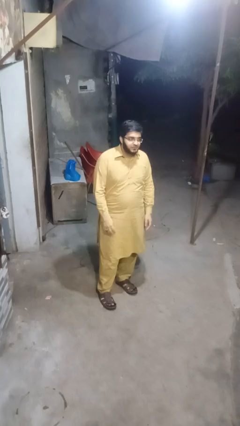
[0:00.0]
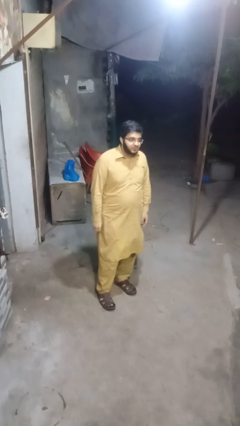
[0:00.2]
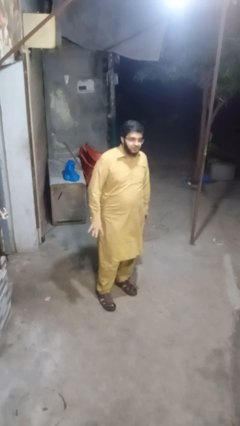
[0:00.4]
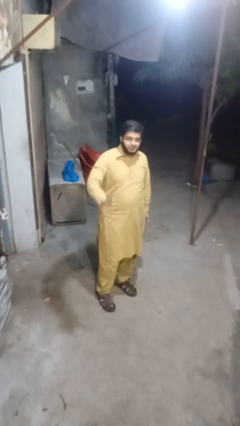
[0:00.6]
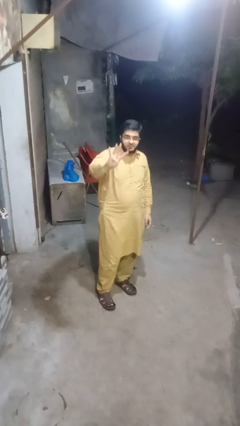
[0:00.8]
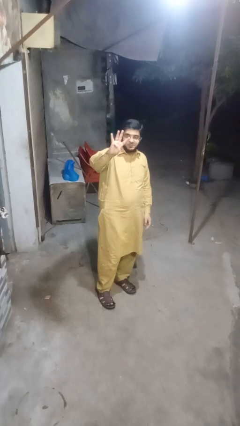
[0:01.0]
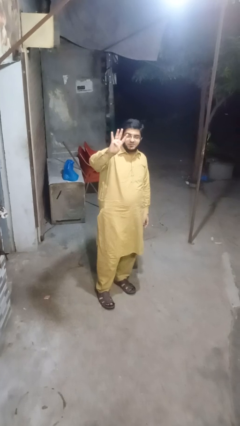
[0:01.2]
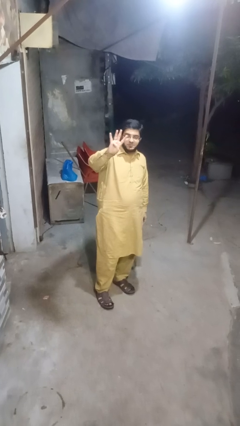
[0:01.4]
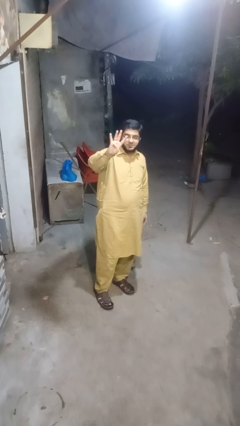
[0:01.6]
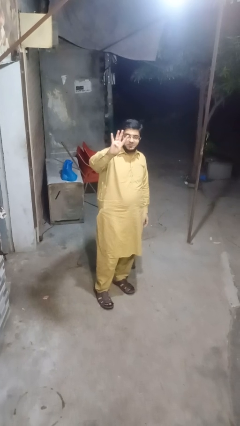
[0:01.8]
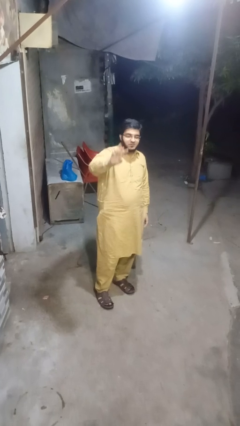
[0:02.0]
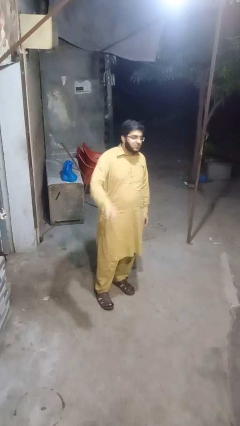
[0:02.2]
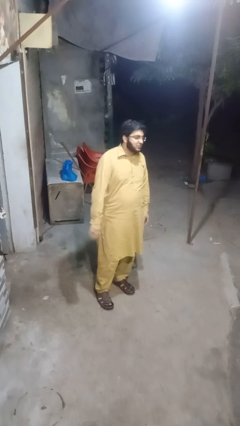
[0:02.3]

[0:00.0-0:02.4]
person gestures number four

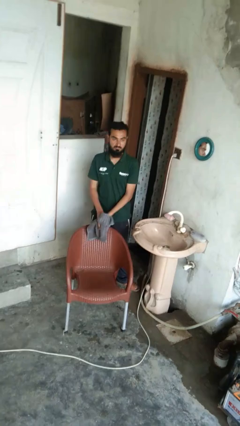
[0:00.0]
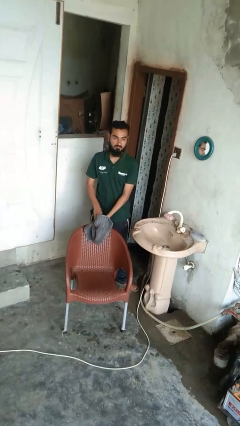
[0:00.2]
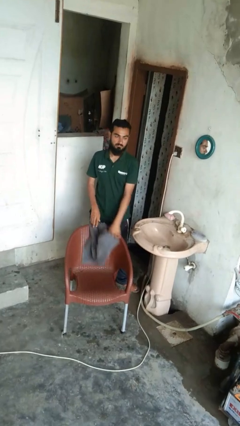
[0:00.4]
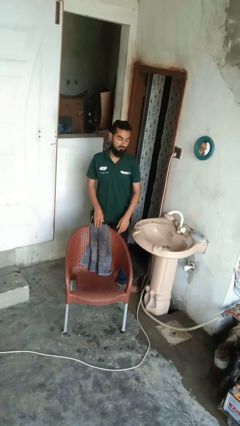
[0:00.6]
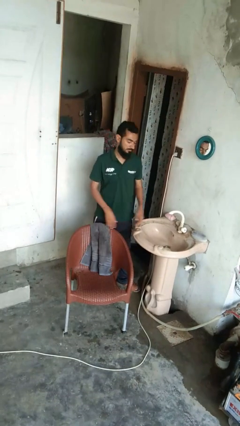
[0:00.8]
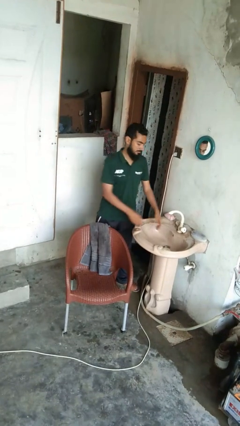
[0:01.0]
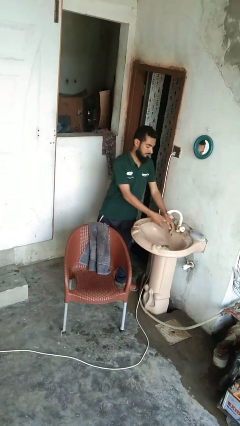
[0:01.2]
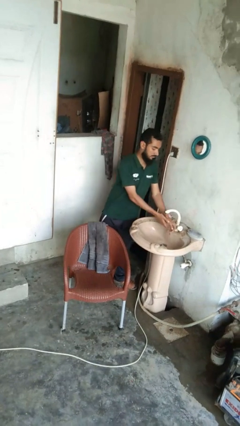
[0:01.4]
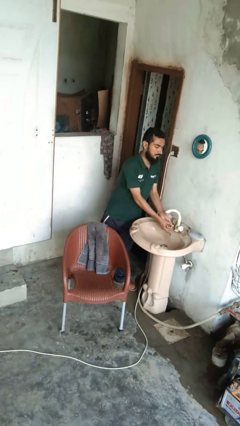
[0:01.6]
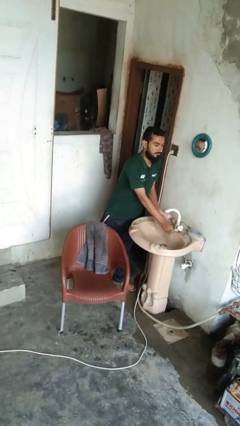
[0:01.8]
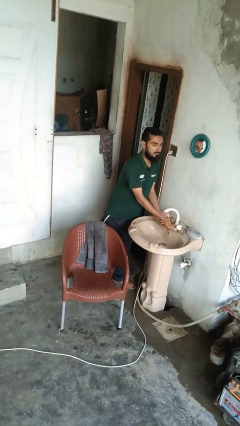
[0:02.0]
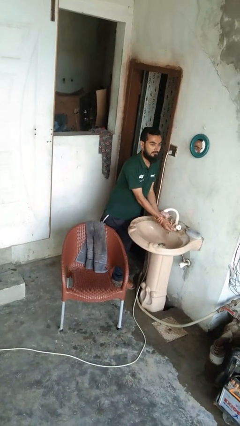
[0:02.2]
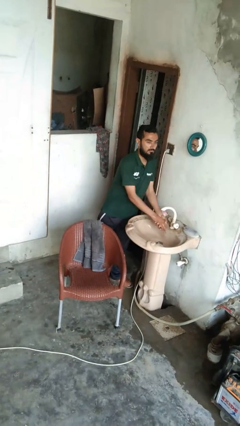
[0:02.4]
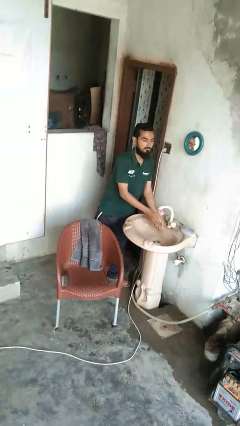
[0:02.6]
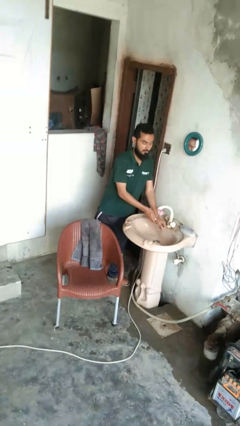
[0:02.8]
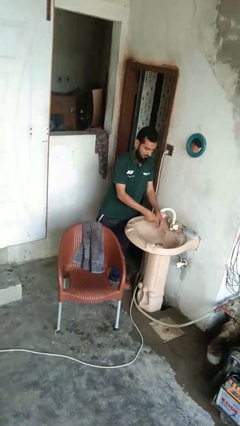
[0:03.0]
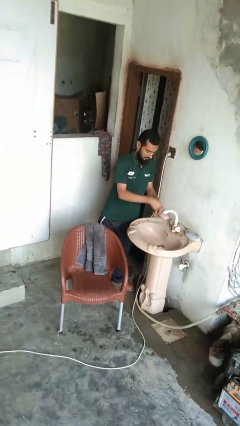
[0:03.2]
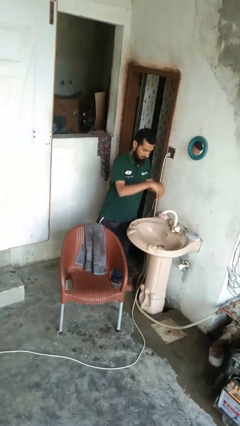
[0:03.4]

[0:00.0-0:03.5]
person washes hands

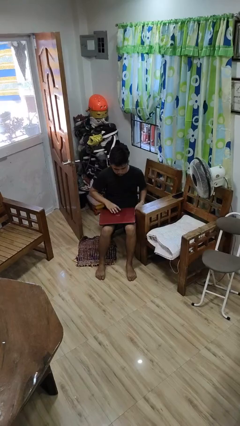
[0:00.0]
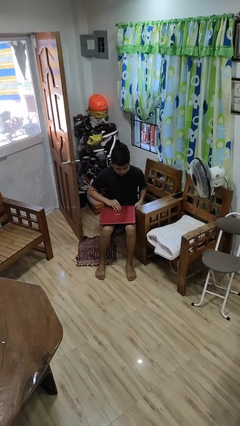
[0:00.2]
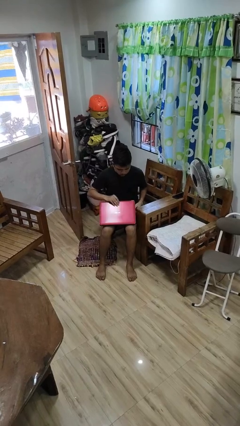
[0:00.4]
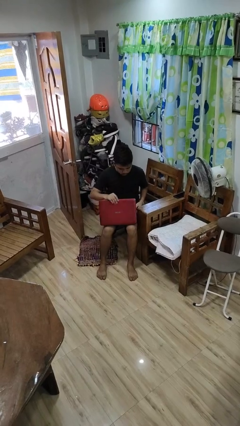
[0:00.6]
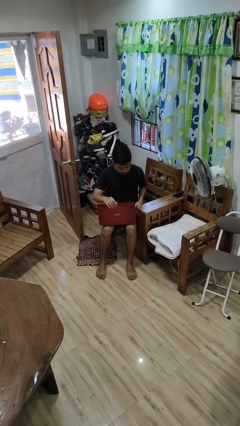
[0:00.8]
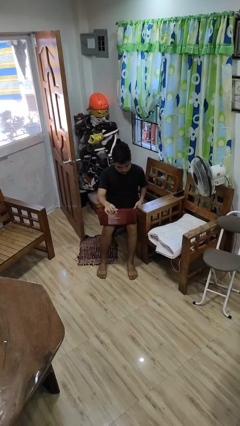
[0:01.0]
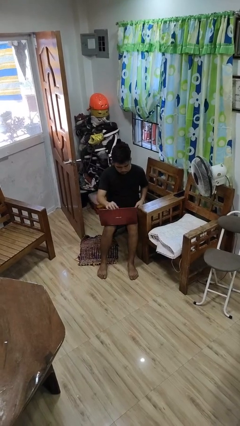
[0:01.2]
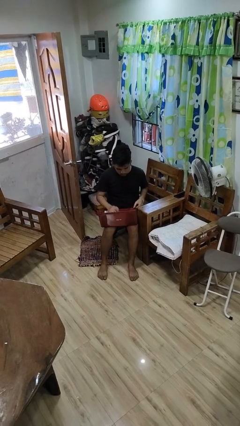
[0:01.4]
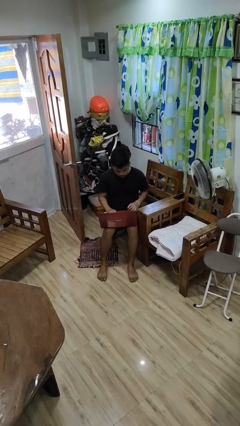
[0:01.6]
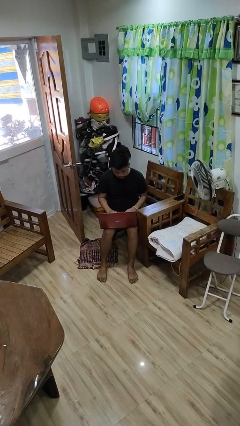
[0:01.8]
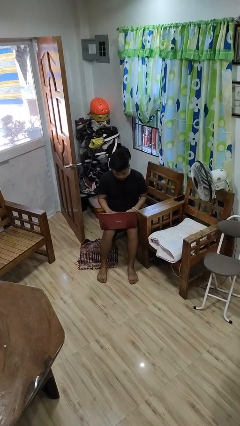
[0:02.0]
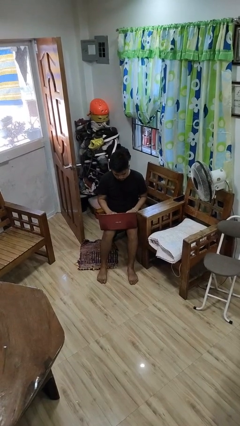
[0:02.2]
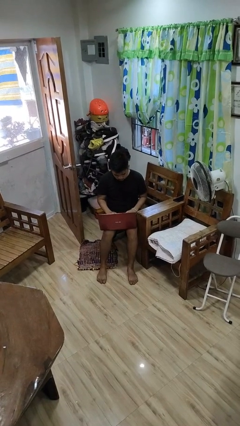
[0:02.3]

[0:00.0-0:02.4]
person opens laptop

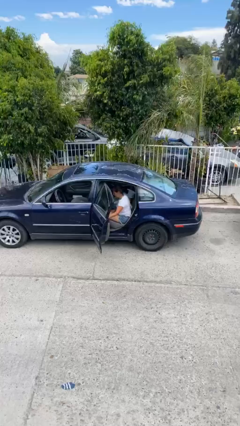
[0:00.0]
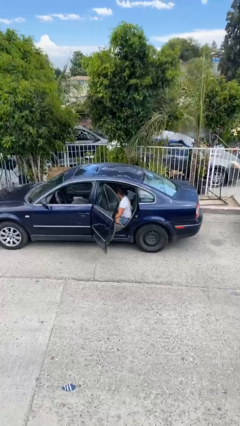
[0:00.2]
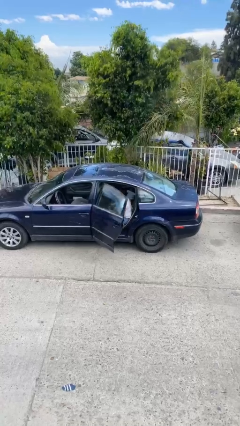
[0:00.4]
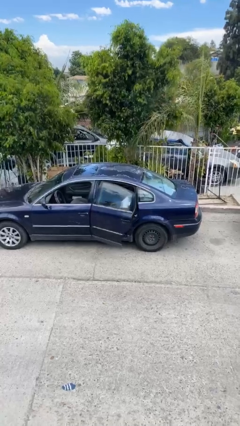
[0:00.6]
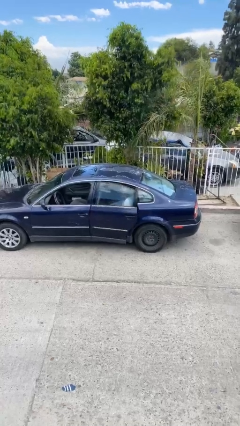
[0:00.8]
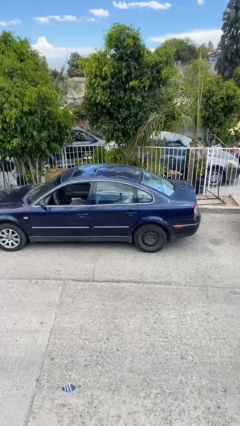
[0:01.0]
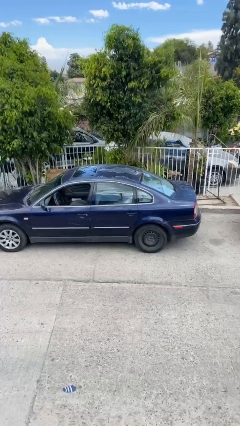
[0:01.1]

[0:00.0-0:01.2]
person closes car door

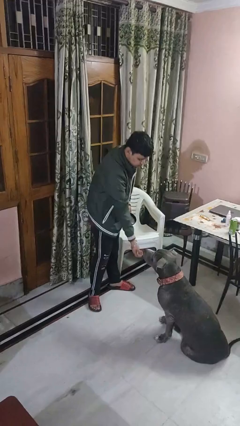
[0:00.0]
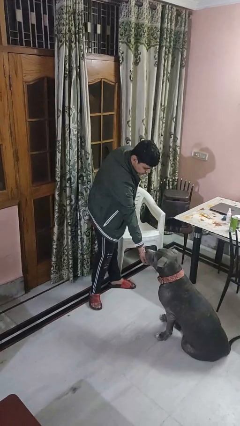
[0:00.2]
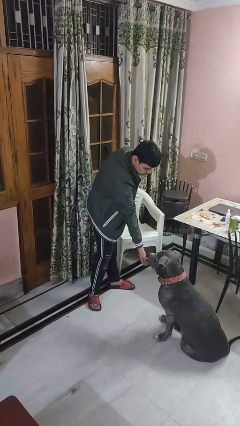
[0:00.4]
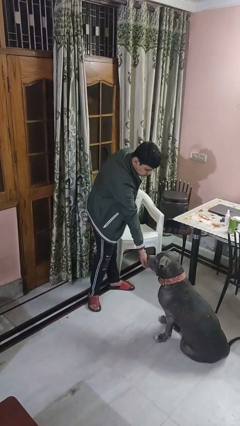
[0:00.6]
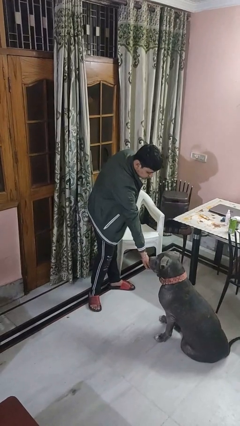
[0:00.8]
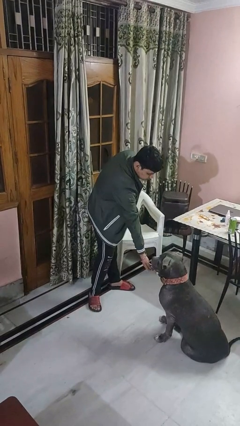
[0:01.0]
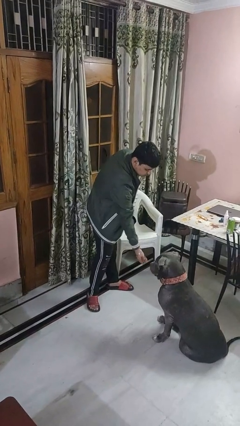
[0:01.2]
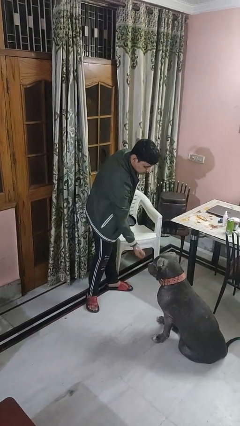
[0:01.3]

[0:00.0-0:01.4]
person feeds dog

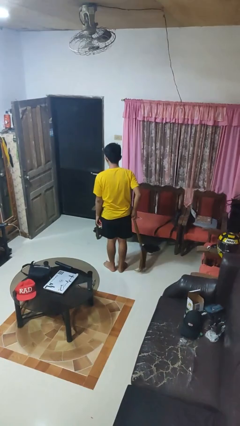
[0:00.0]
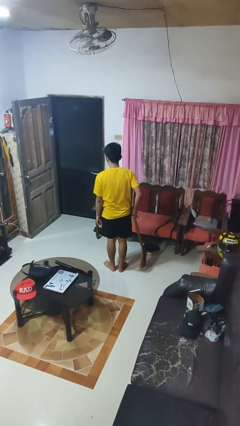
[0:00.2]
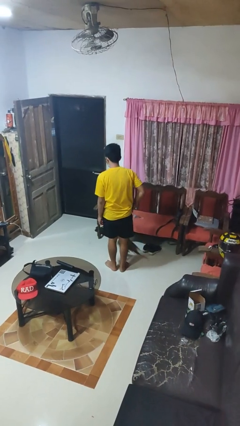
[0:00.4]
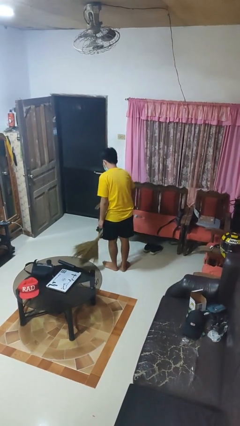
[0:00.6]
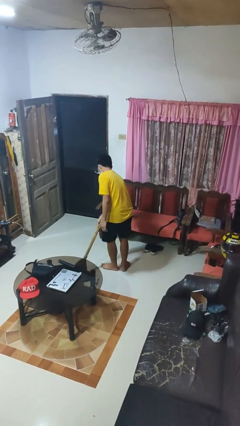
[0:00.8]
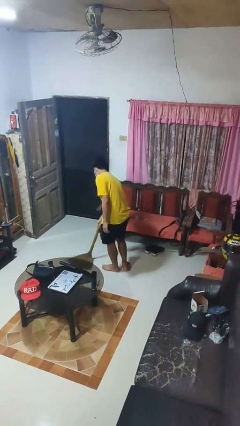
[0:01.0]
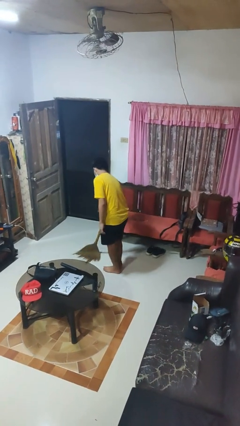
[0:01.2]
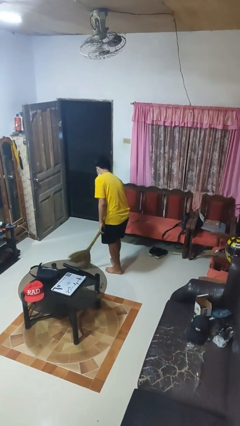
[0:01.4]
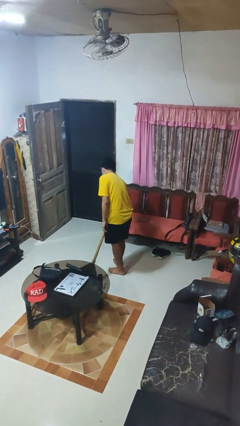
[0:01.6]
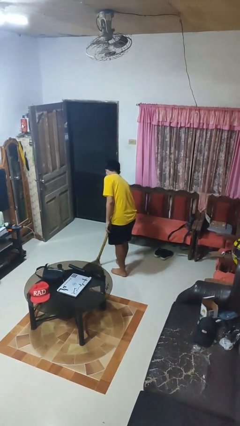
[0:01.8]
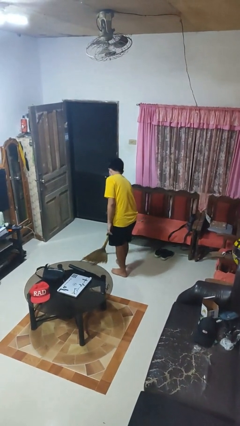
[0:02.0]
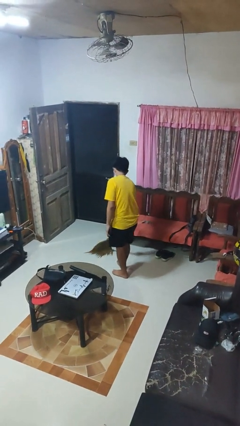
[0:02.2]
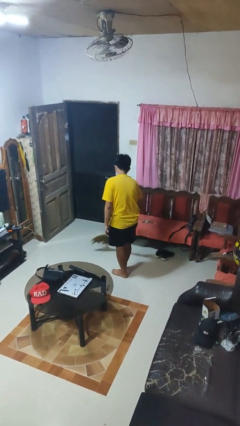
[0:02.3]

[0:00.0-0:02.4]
person sweeps floor

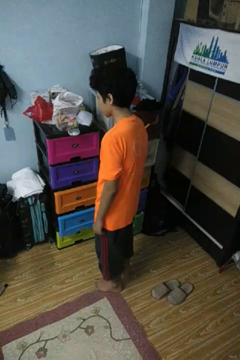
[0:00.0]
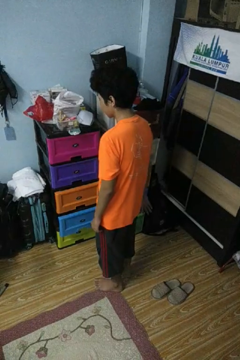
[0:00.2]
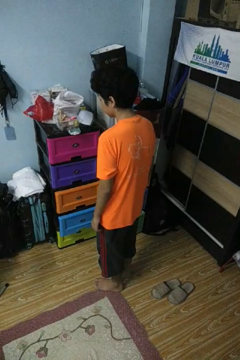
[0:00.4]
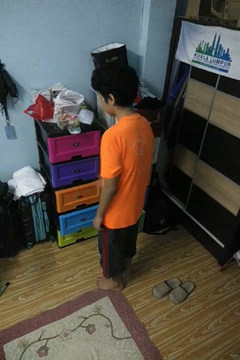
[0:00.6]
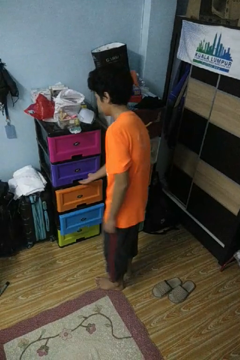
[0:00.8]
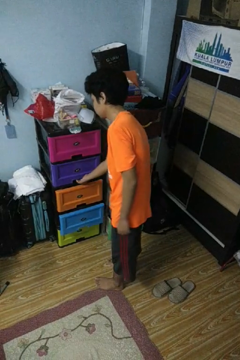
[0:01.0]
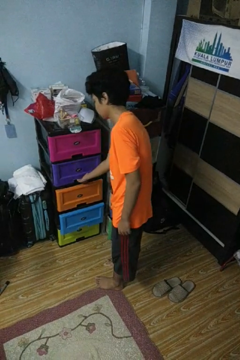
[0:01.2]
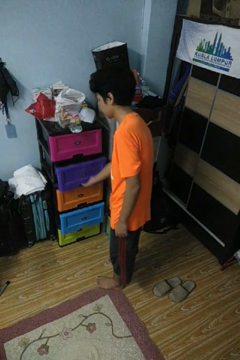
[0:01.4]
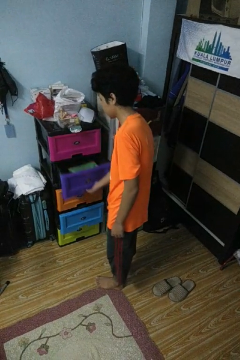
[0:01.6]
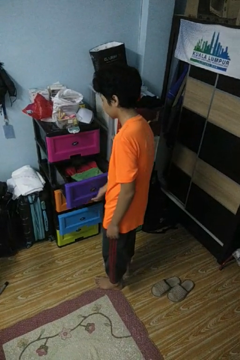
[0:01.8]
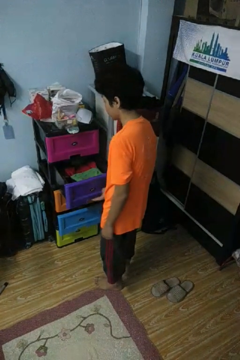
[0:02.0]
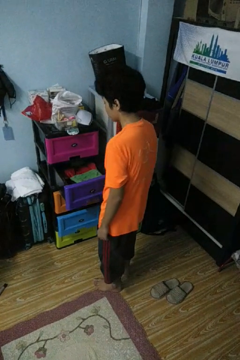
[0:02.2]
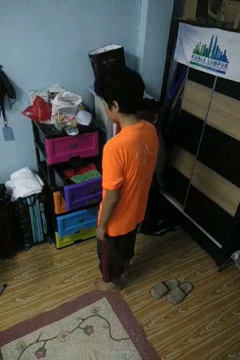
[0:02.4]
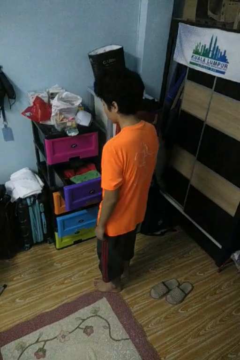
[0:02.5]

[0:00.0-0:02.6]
person opens dresser drawer

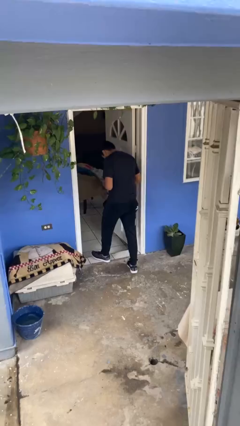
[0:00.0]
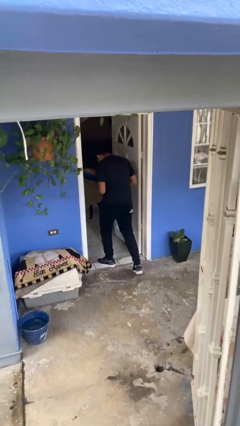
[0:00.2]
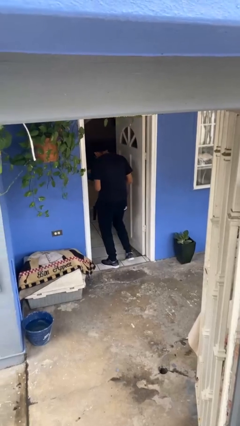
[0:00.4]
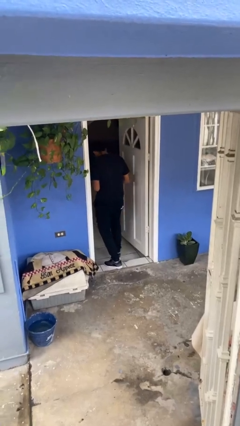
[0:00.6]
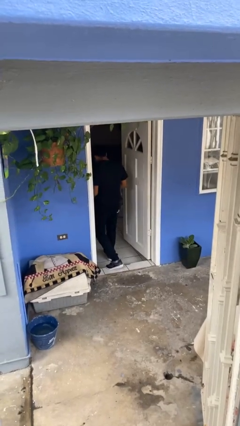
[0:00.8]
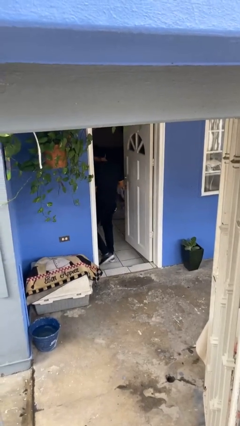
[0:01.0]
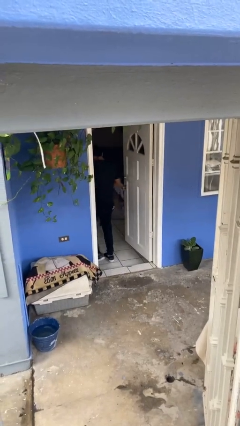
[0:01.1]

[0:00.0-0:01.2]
person exits scene through structure
